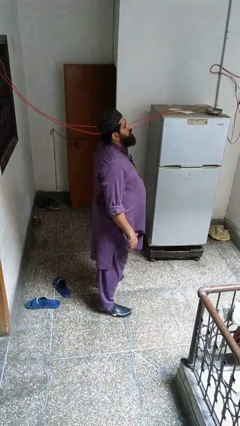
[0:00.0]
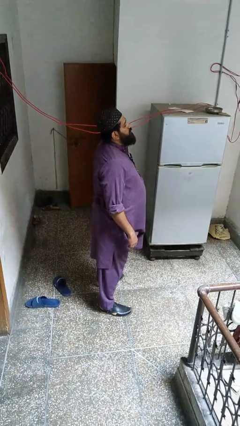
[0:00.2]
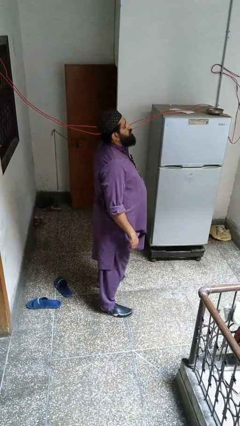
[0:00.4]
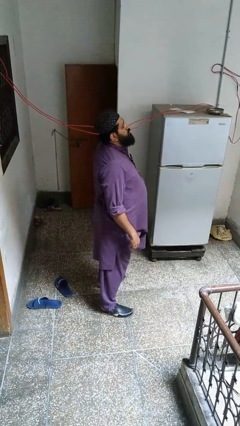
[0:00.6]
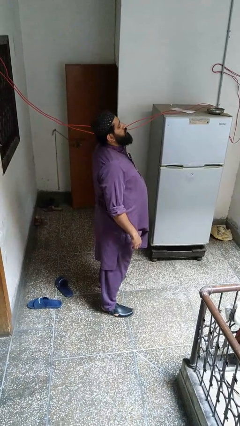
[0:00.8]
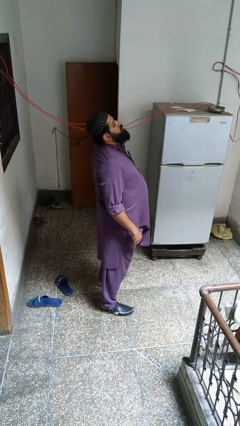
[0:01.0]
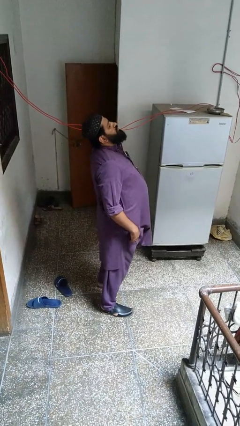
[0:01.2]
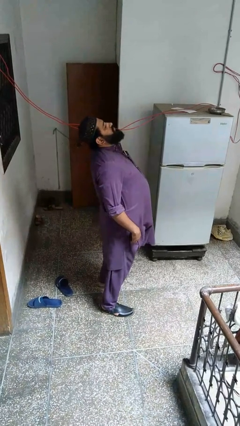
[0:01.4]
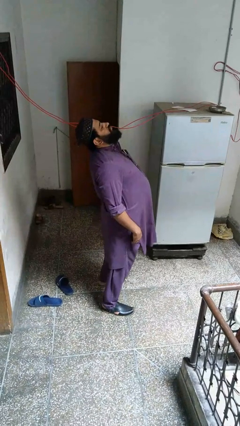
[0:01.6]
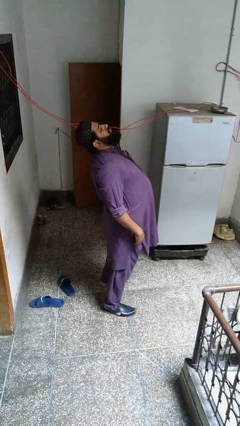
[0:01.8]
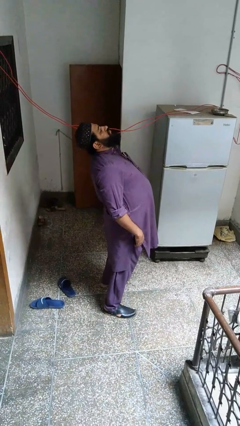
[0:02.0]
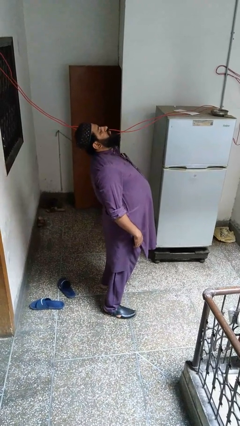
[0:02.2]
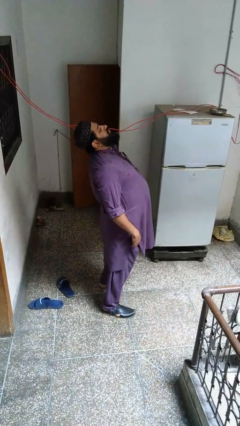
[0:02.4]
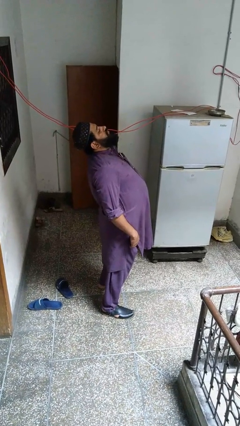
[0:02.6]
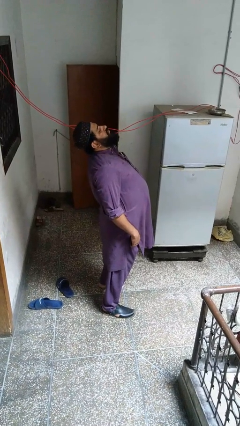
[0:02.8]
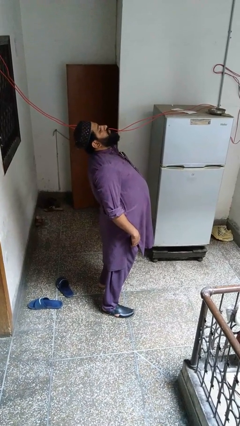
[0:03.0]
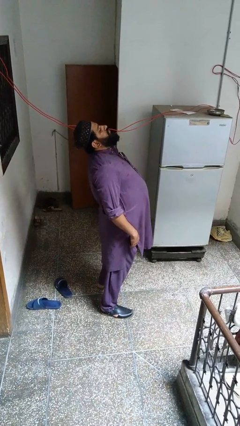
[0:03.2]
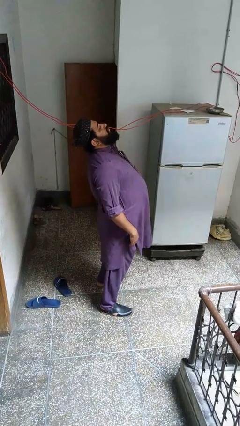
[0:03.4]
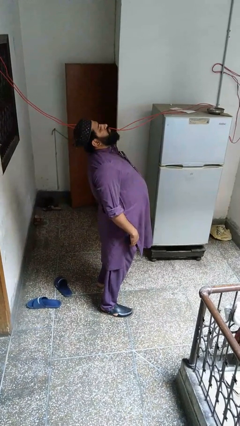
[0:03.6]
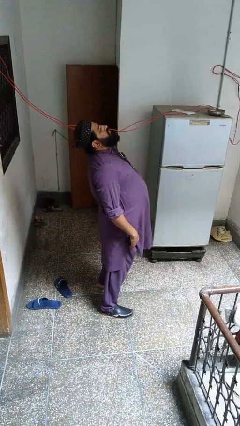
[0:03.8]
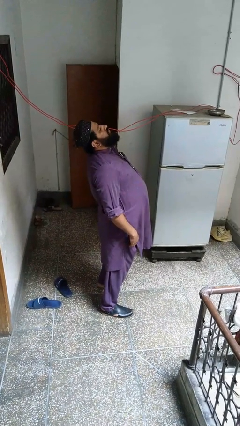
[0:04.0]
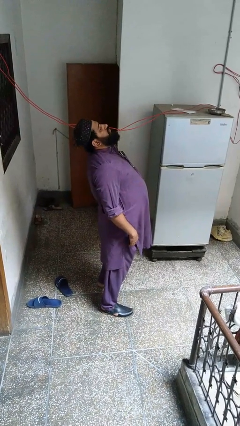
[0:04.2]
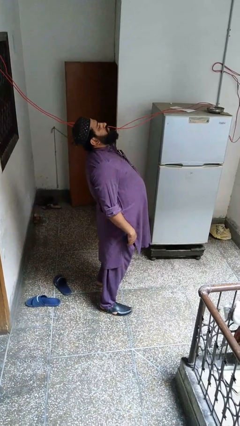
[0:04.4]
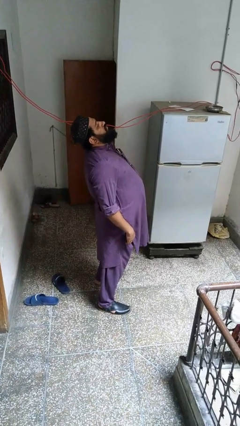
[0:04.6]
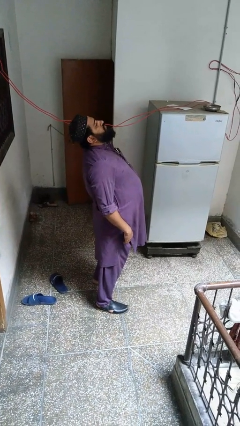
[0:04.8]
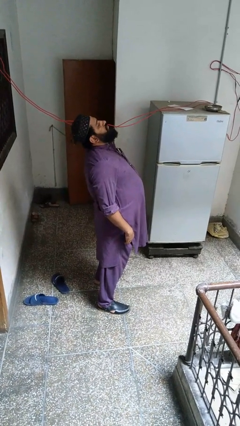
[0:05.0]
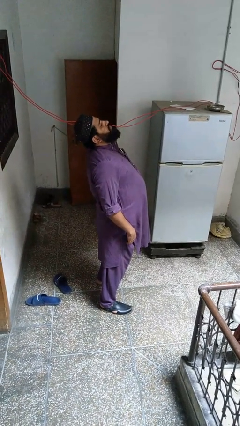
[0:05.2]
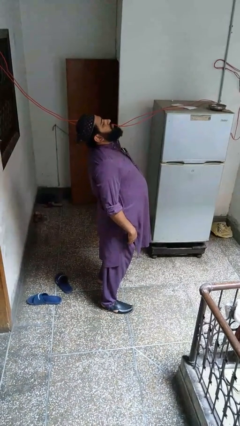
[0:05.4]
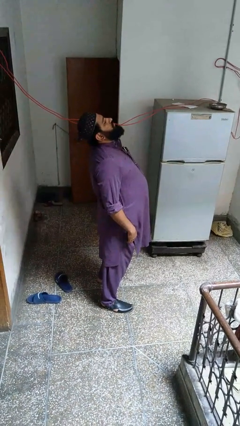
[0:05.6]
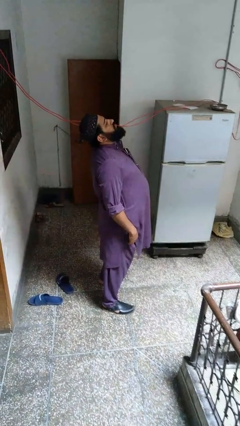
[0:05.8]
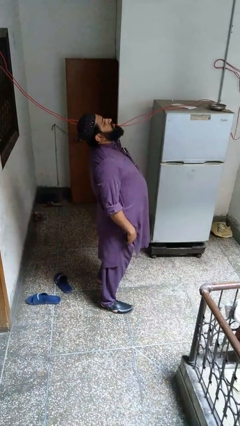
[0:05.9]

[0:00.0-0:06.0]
person stretches back

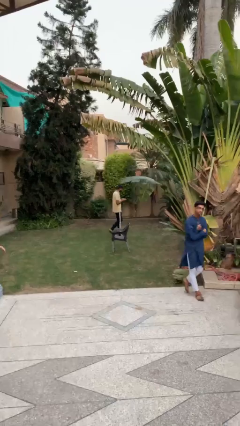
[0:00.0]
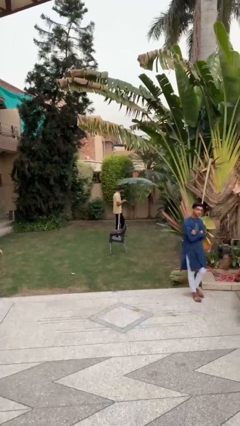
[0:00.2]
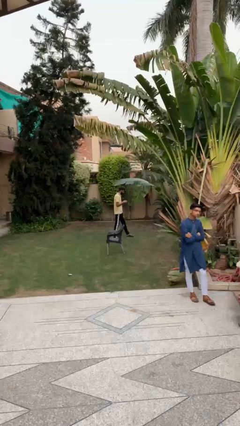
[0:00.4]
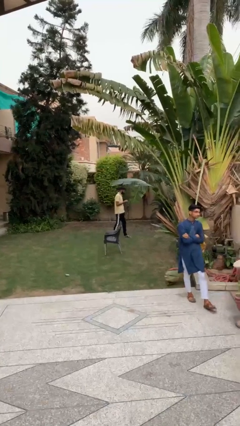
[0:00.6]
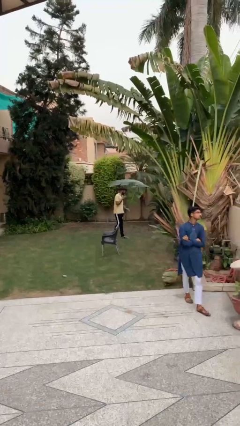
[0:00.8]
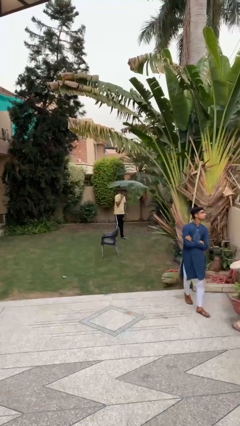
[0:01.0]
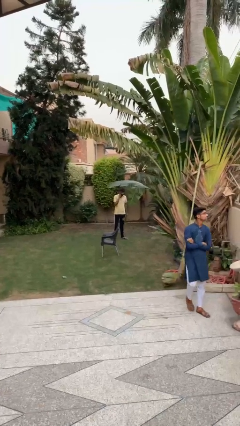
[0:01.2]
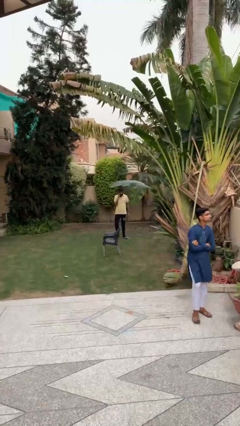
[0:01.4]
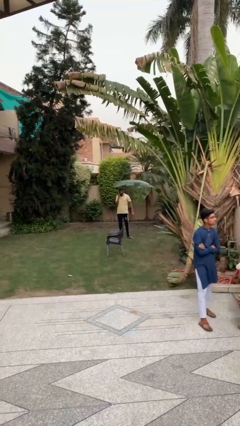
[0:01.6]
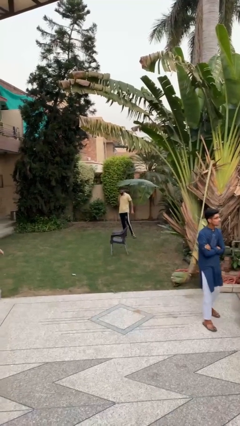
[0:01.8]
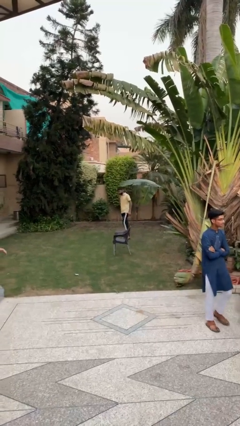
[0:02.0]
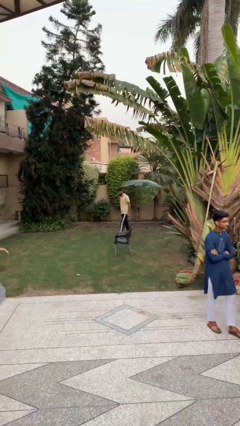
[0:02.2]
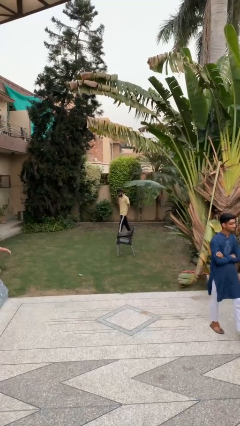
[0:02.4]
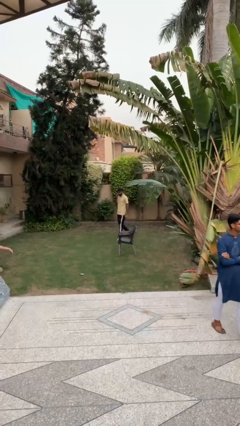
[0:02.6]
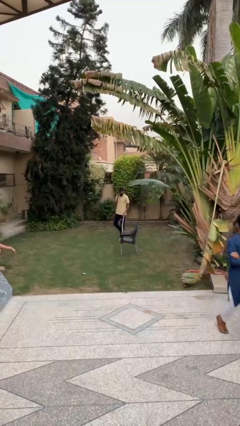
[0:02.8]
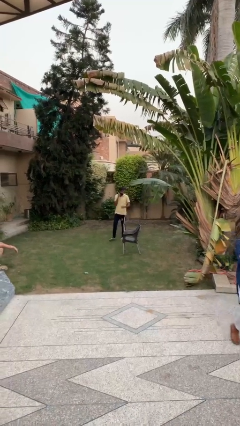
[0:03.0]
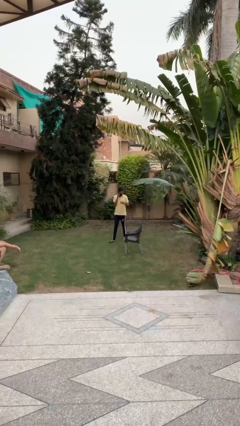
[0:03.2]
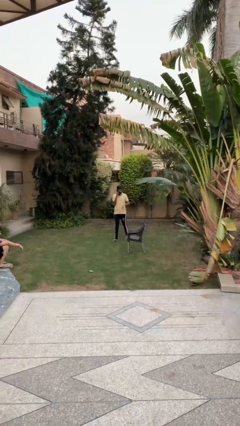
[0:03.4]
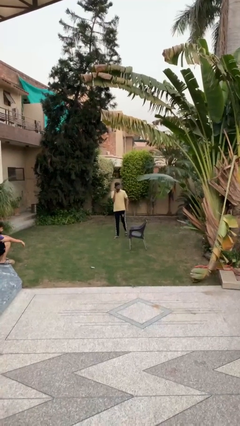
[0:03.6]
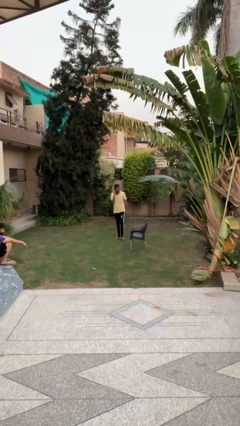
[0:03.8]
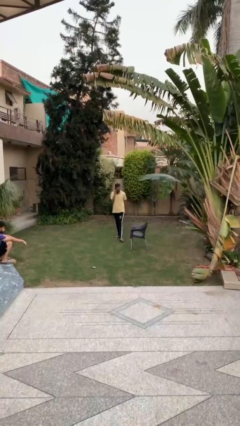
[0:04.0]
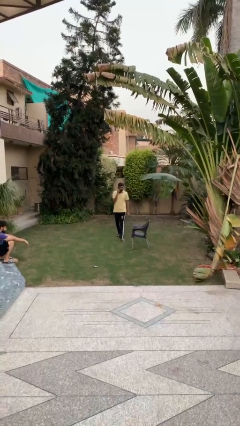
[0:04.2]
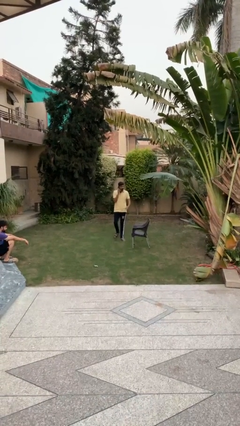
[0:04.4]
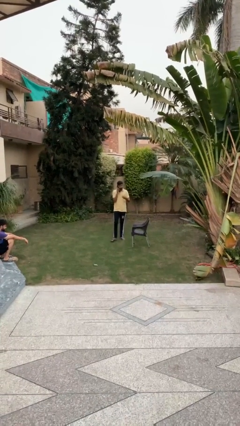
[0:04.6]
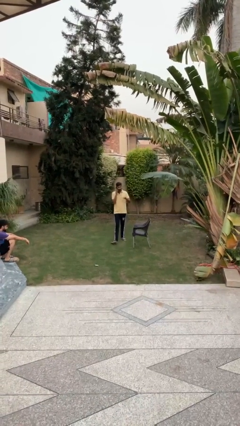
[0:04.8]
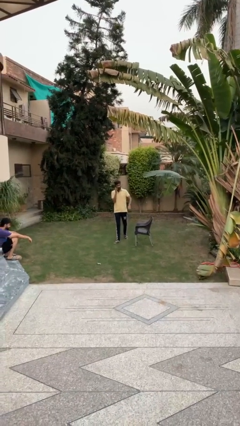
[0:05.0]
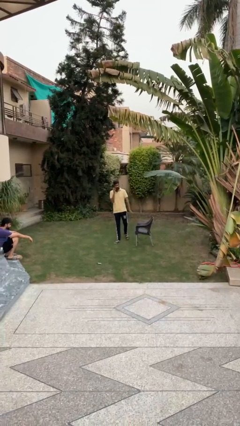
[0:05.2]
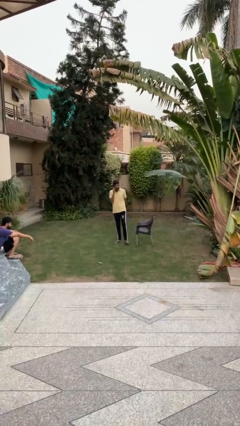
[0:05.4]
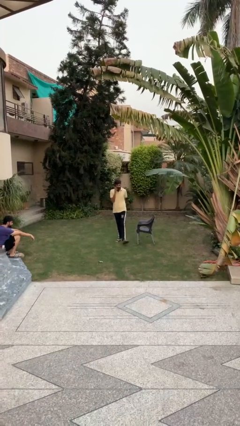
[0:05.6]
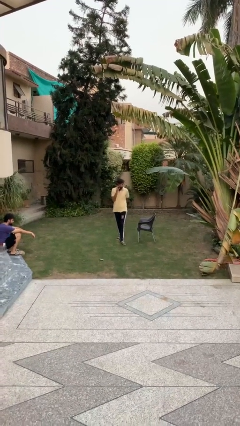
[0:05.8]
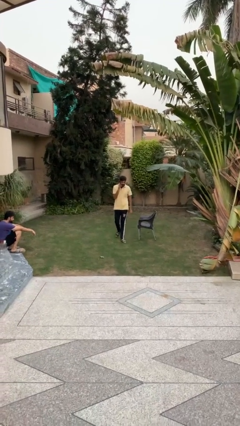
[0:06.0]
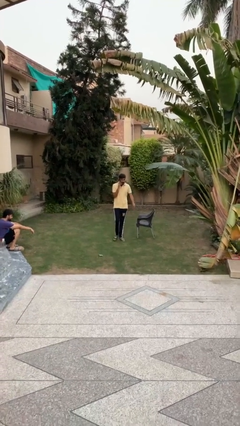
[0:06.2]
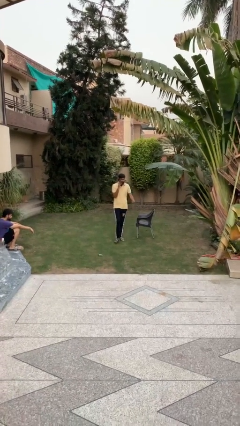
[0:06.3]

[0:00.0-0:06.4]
person talks on phone

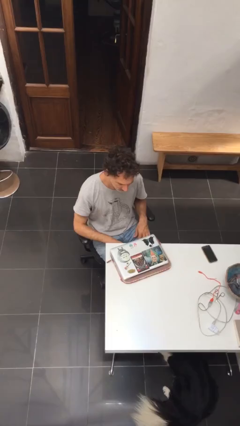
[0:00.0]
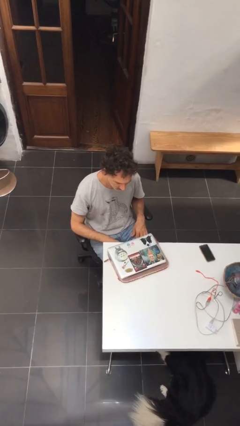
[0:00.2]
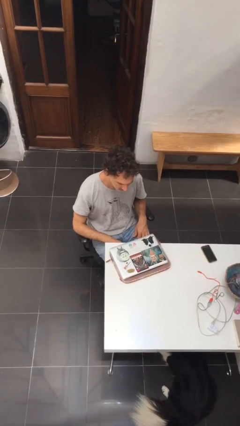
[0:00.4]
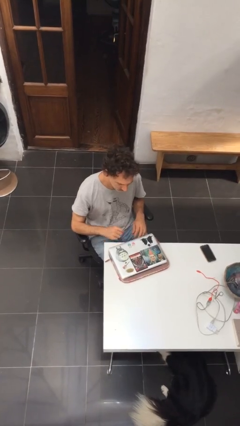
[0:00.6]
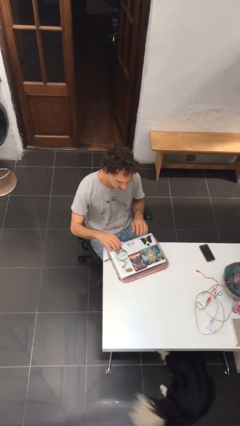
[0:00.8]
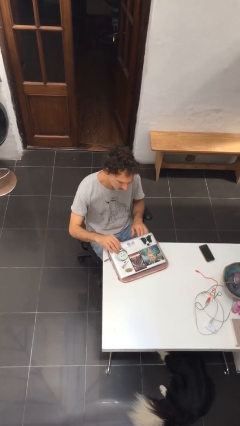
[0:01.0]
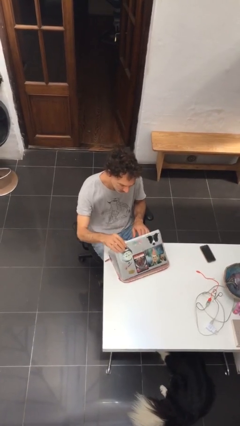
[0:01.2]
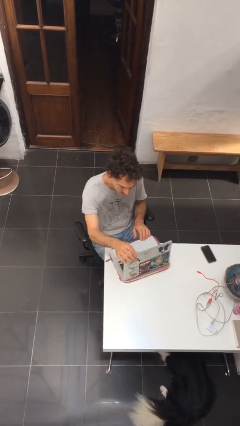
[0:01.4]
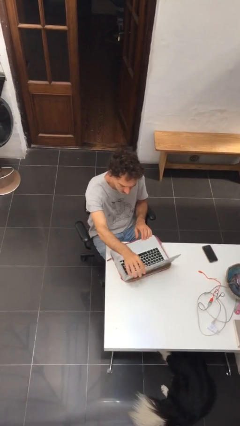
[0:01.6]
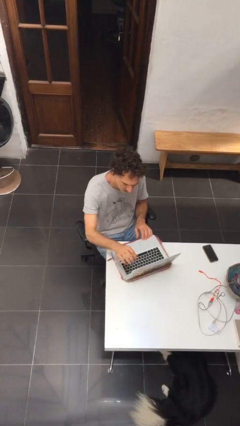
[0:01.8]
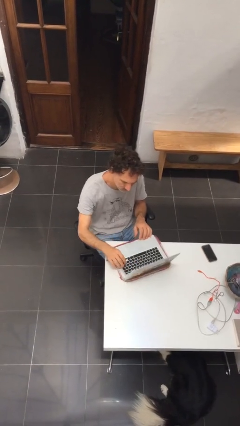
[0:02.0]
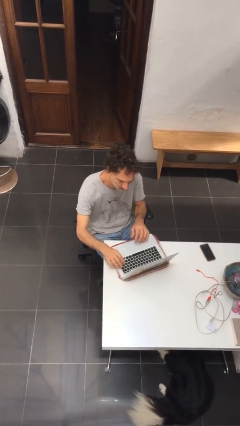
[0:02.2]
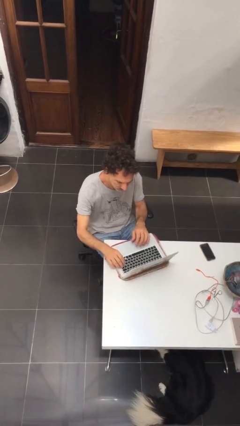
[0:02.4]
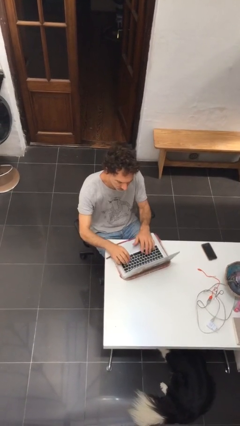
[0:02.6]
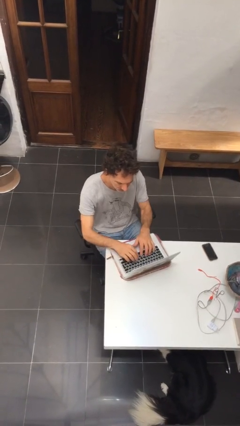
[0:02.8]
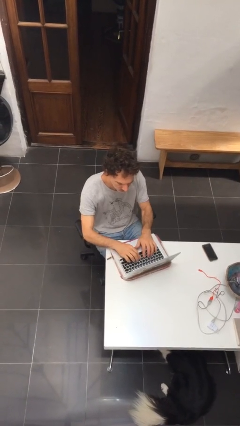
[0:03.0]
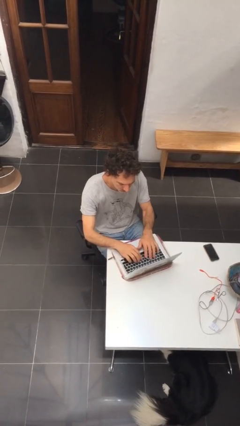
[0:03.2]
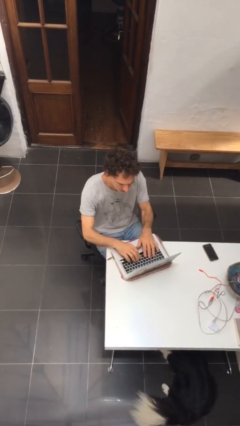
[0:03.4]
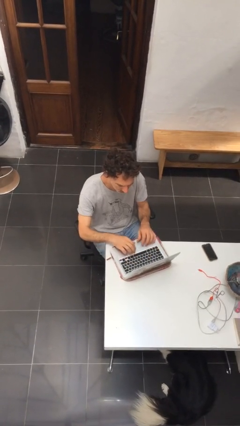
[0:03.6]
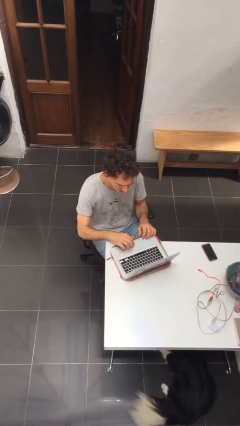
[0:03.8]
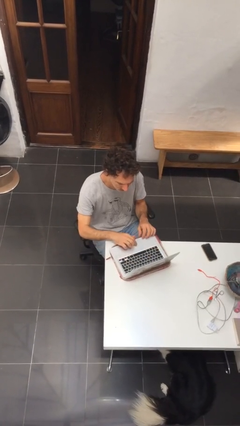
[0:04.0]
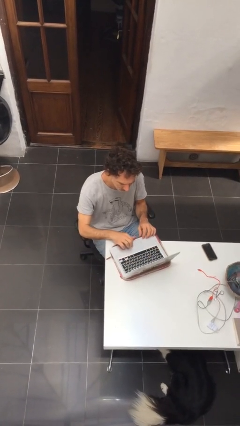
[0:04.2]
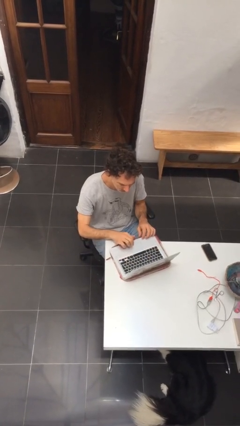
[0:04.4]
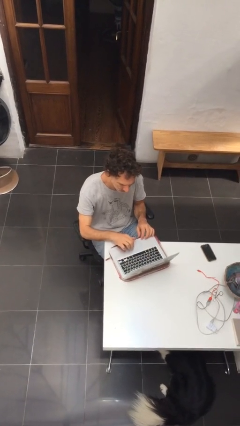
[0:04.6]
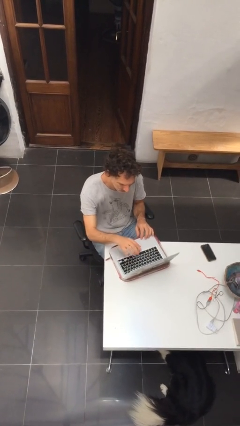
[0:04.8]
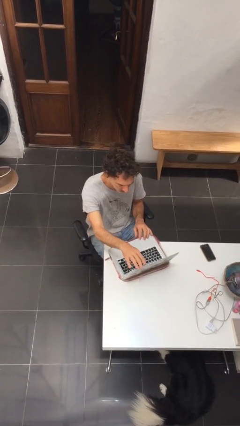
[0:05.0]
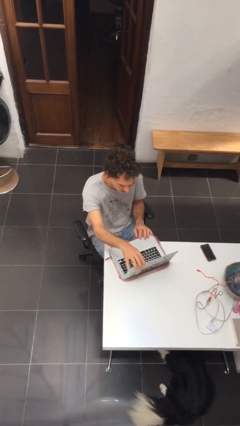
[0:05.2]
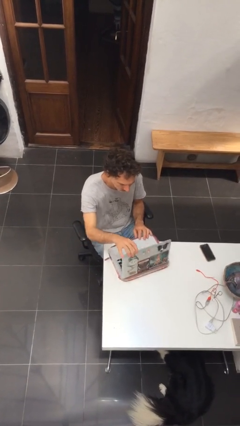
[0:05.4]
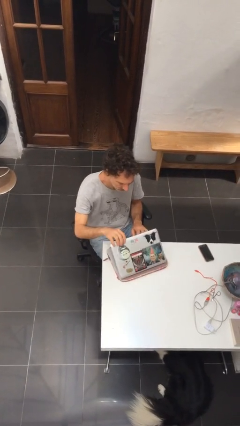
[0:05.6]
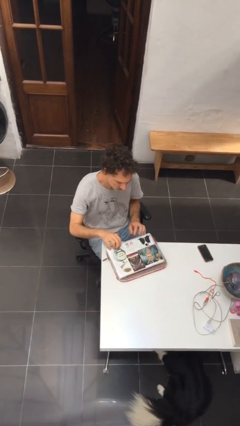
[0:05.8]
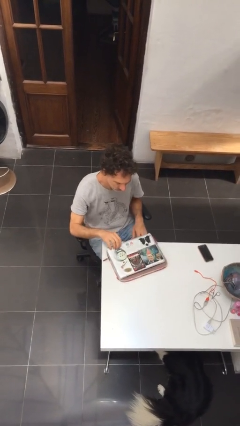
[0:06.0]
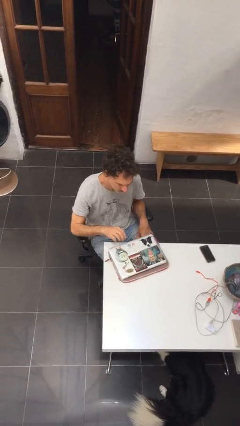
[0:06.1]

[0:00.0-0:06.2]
person interacts with laptop
